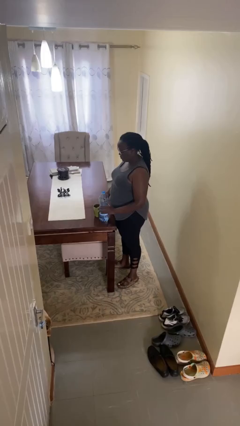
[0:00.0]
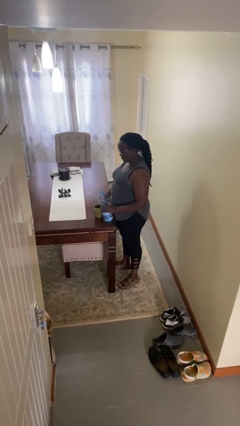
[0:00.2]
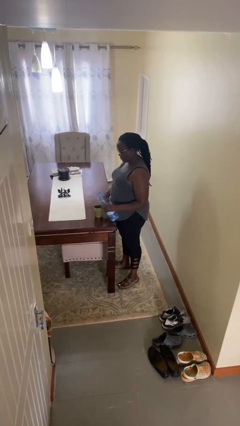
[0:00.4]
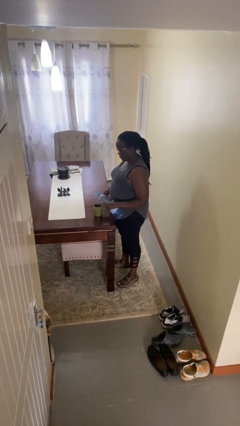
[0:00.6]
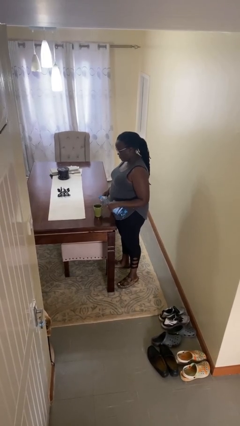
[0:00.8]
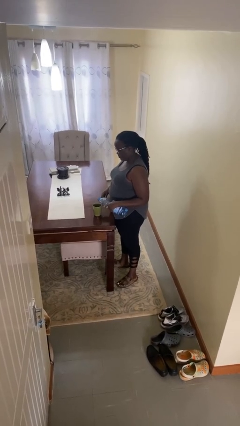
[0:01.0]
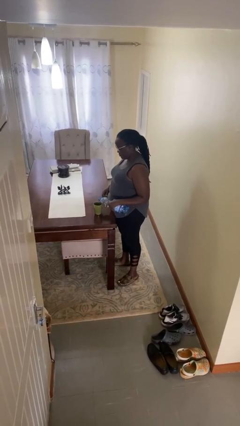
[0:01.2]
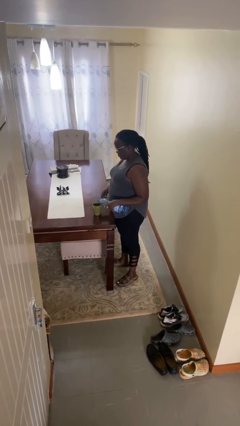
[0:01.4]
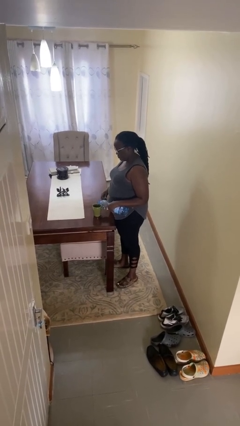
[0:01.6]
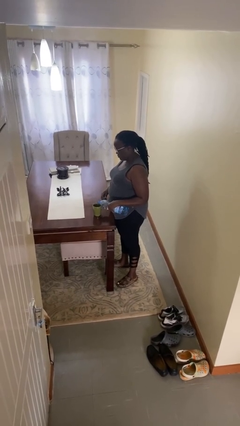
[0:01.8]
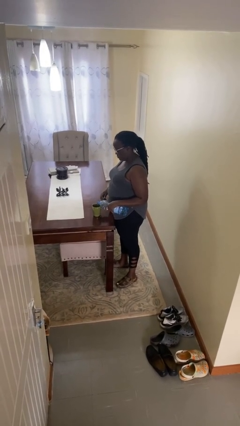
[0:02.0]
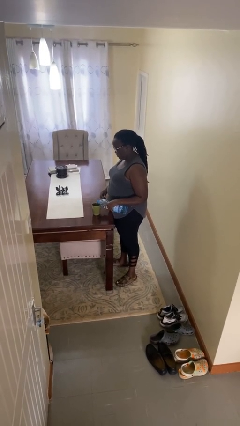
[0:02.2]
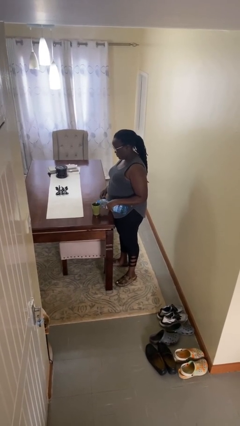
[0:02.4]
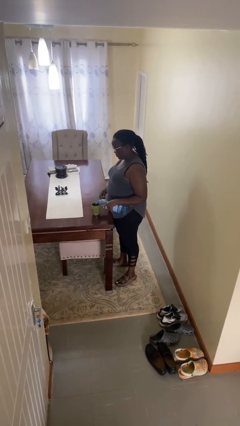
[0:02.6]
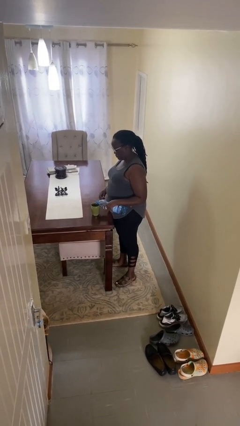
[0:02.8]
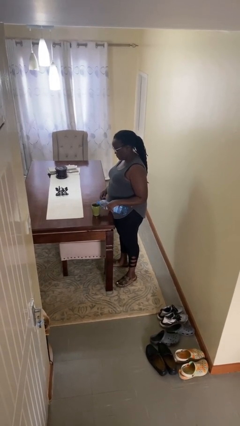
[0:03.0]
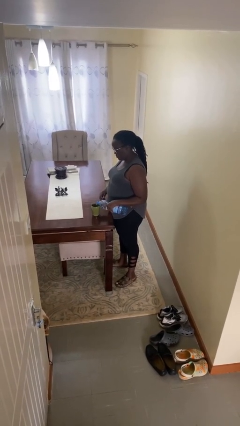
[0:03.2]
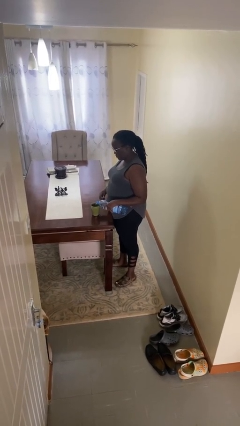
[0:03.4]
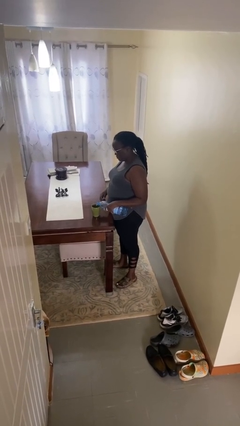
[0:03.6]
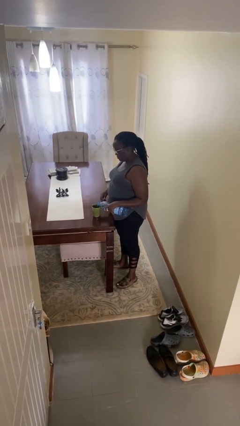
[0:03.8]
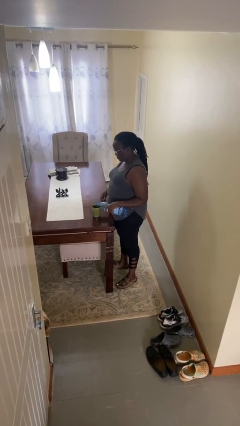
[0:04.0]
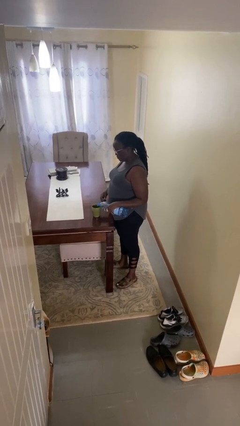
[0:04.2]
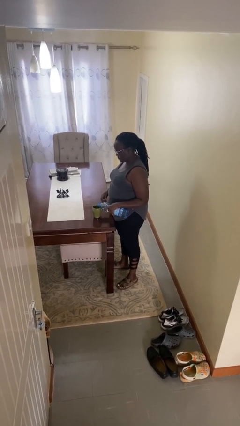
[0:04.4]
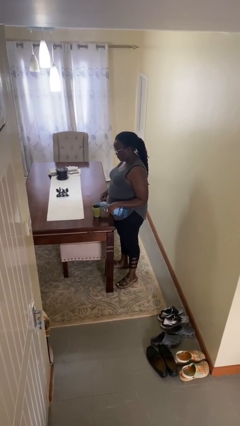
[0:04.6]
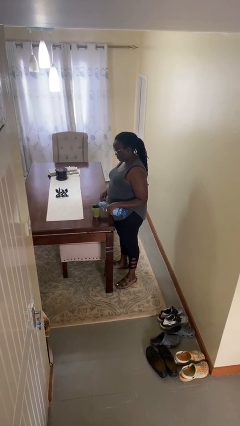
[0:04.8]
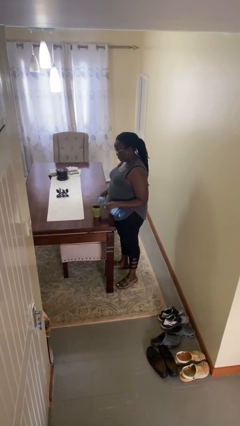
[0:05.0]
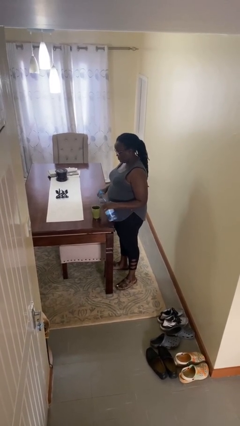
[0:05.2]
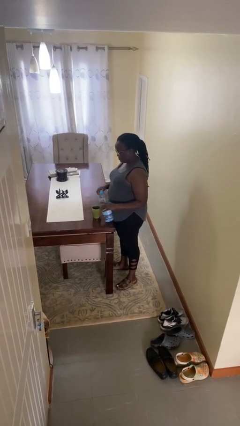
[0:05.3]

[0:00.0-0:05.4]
person pours liquid into cup

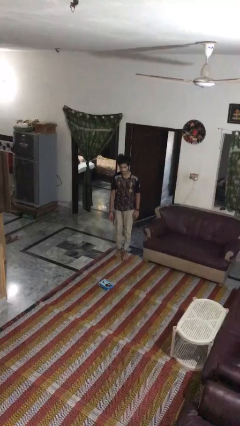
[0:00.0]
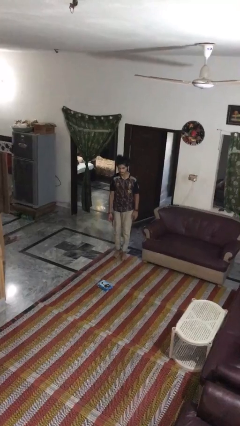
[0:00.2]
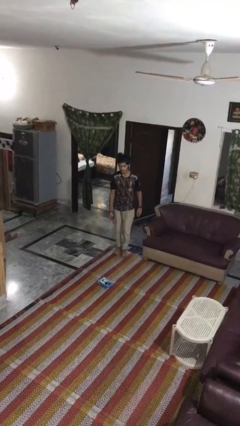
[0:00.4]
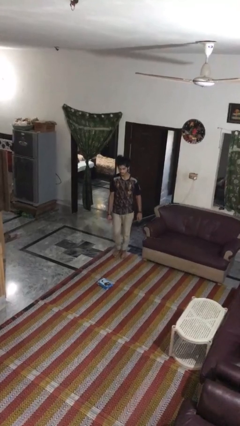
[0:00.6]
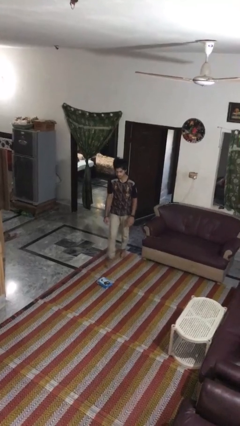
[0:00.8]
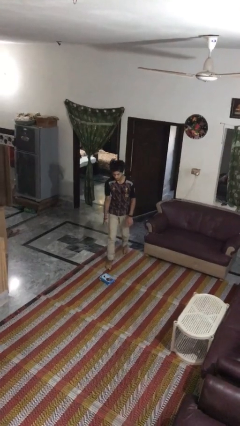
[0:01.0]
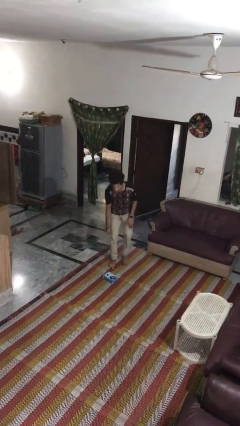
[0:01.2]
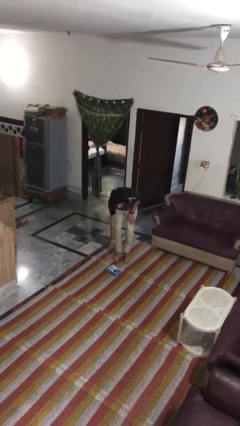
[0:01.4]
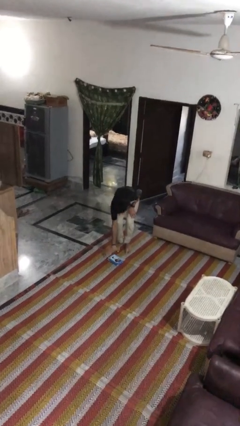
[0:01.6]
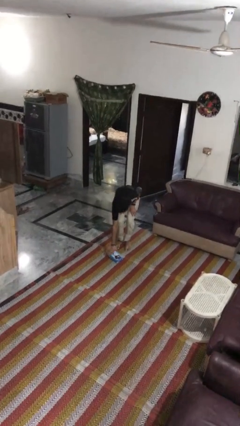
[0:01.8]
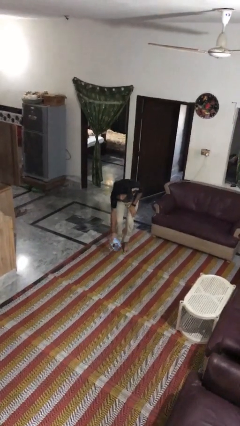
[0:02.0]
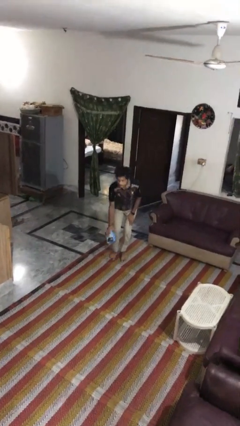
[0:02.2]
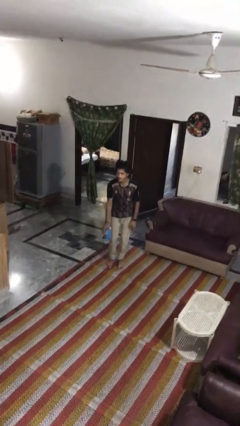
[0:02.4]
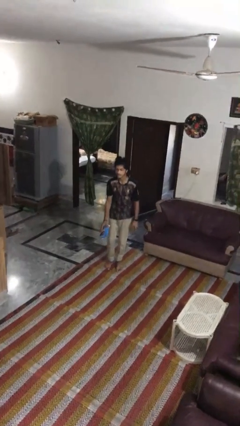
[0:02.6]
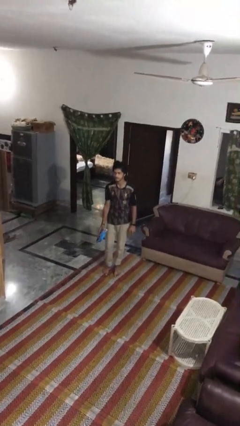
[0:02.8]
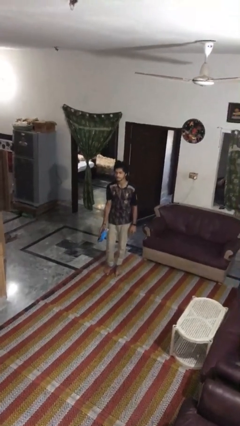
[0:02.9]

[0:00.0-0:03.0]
person picks up object from floor

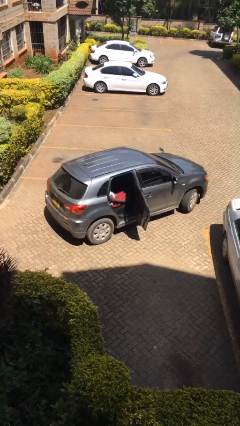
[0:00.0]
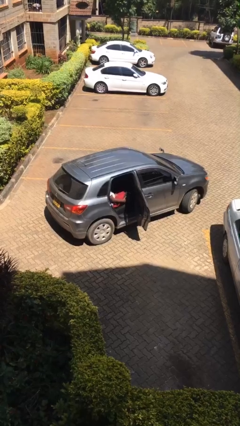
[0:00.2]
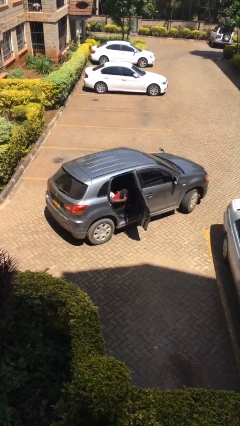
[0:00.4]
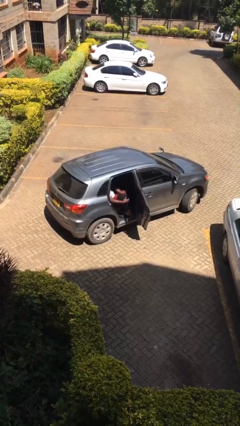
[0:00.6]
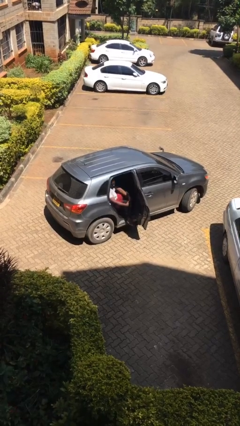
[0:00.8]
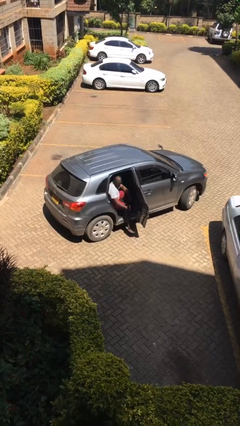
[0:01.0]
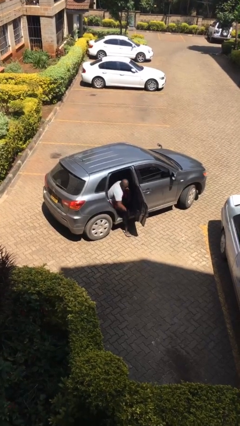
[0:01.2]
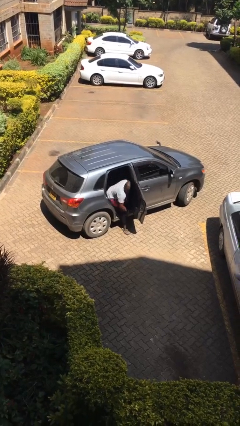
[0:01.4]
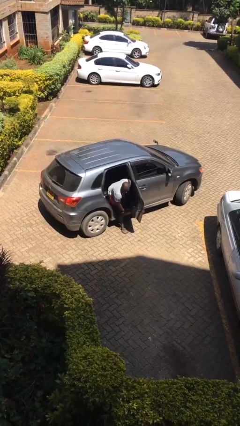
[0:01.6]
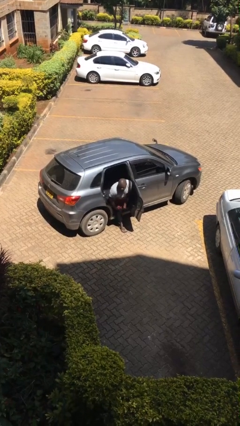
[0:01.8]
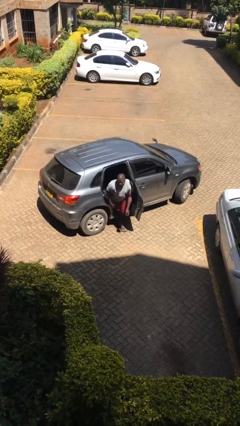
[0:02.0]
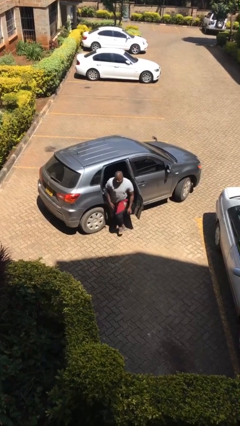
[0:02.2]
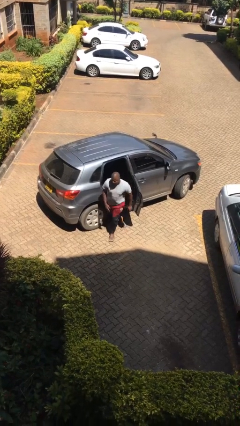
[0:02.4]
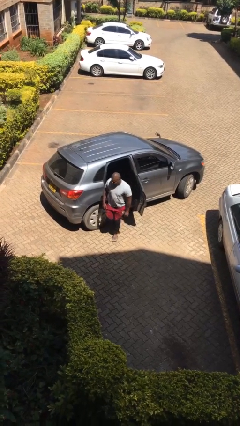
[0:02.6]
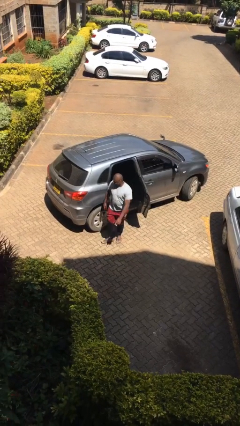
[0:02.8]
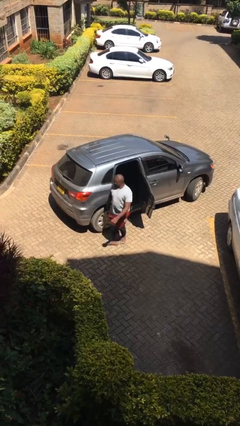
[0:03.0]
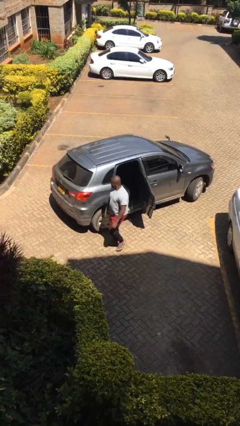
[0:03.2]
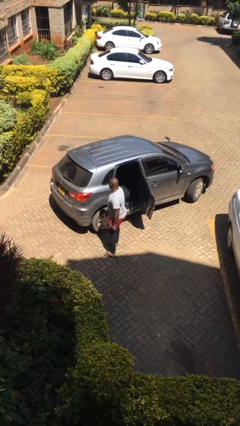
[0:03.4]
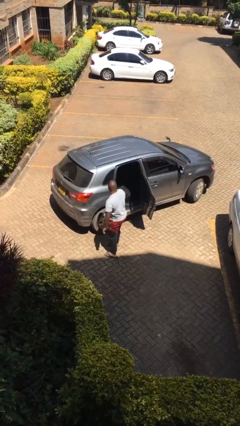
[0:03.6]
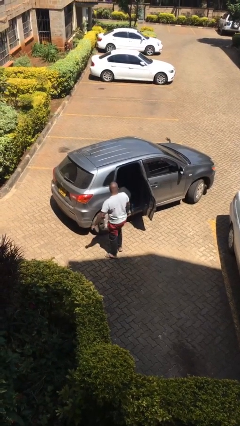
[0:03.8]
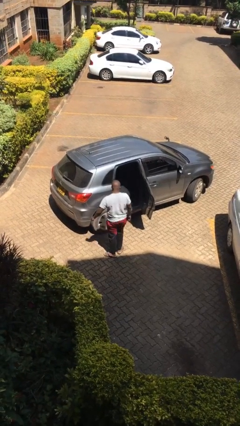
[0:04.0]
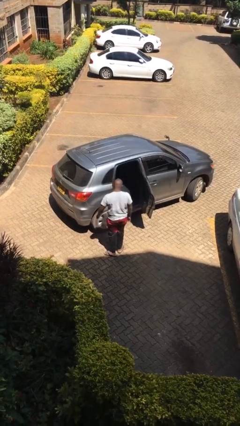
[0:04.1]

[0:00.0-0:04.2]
person exits car

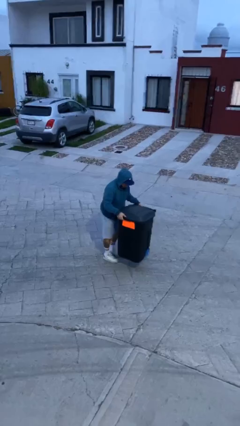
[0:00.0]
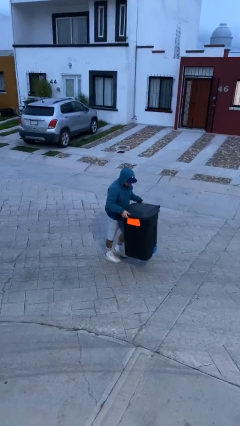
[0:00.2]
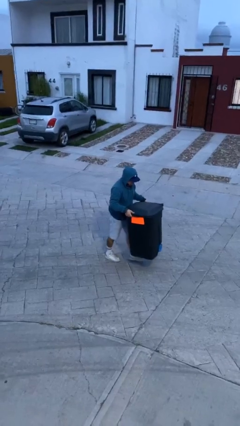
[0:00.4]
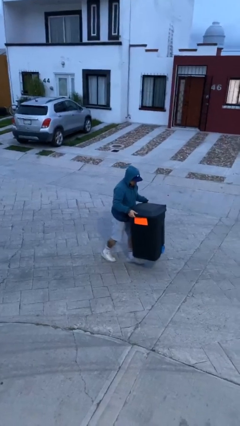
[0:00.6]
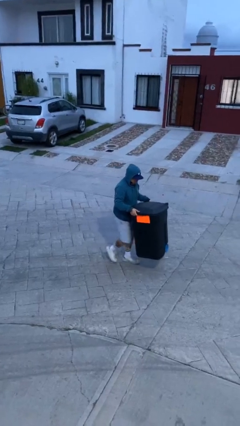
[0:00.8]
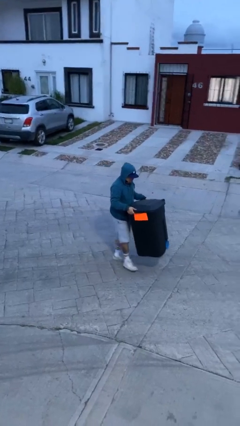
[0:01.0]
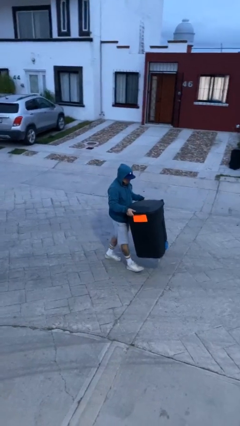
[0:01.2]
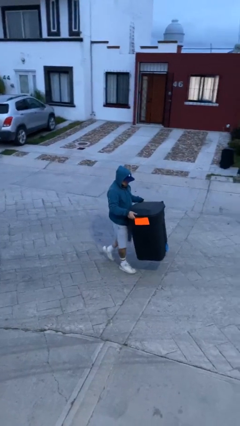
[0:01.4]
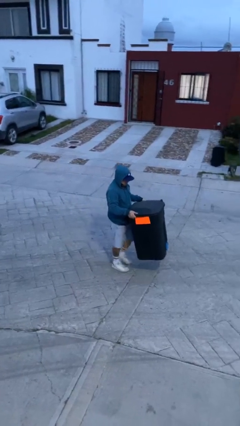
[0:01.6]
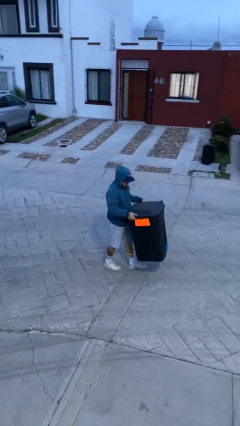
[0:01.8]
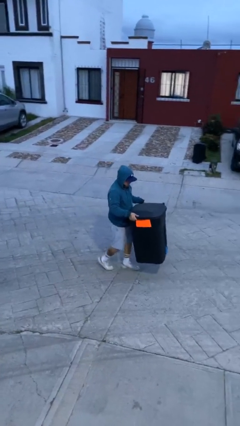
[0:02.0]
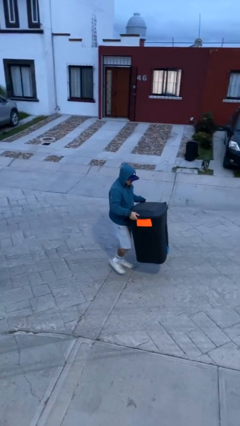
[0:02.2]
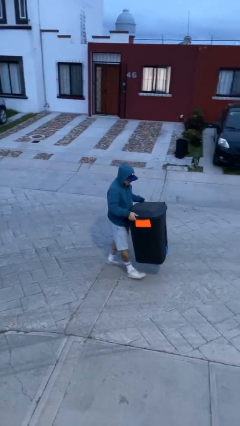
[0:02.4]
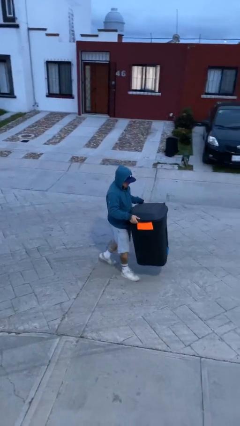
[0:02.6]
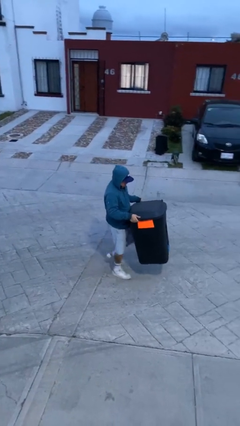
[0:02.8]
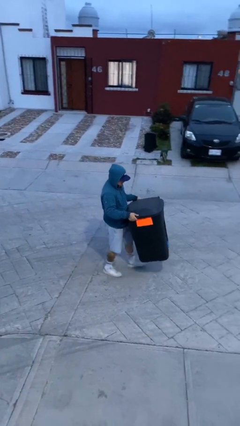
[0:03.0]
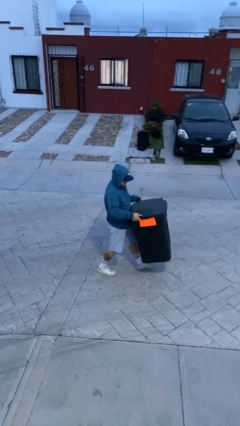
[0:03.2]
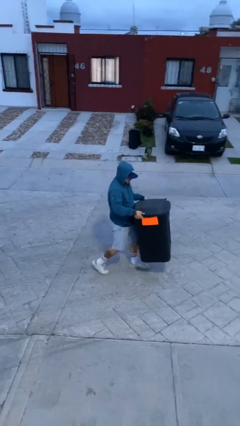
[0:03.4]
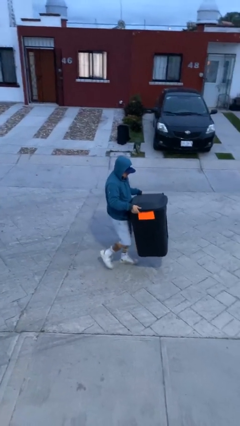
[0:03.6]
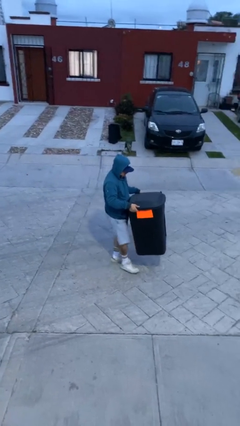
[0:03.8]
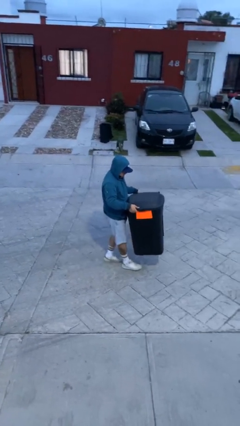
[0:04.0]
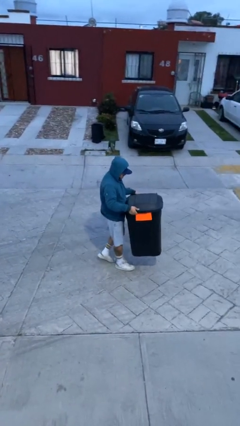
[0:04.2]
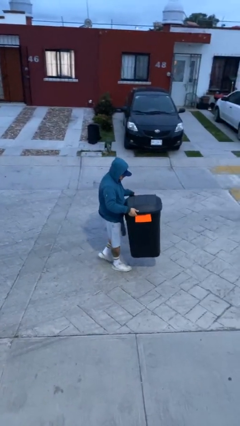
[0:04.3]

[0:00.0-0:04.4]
person carries heavy object

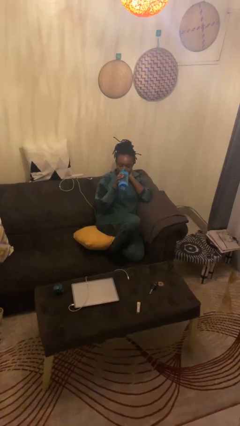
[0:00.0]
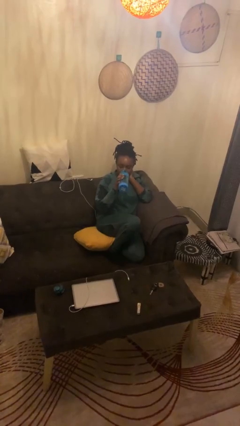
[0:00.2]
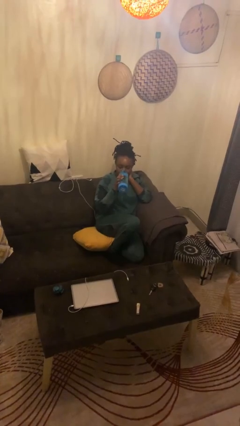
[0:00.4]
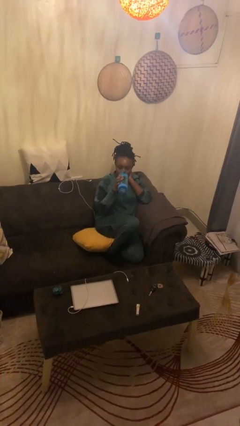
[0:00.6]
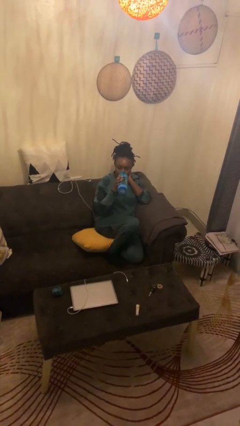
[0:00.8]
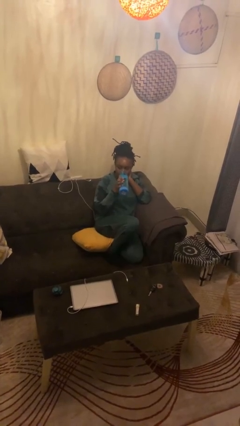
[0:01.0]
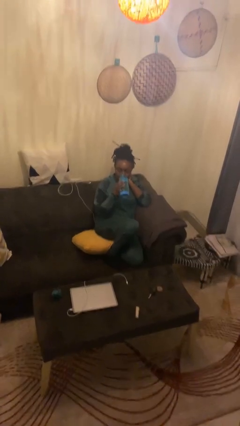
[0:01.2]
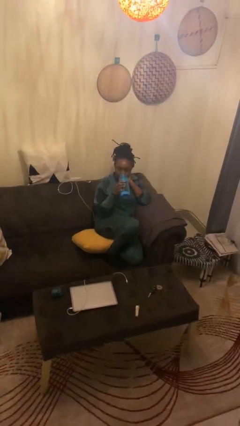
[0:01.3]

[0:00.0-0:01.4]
person drinks from bottle
